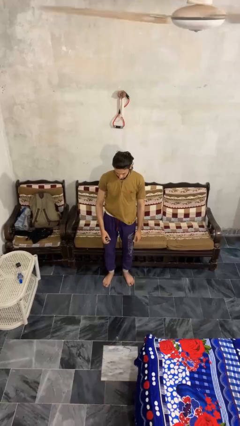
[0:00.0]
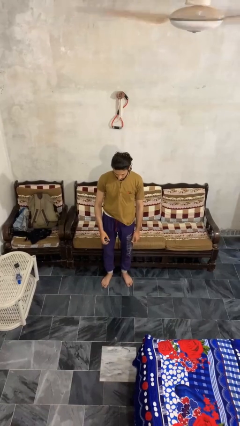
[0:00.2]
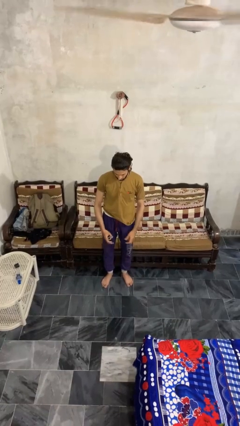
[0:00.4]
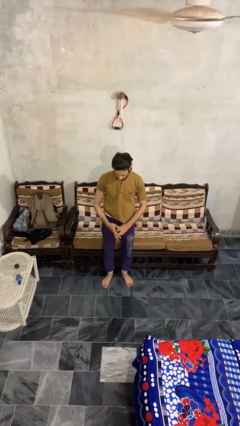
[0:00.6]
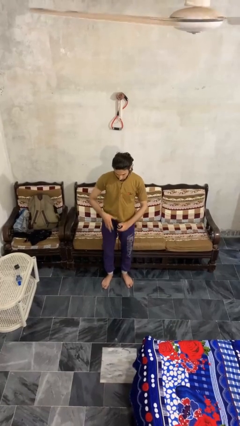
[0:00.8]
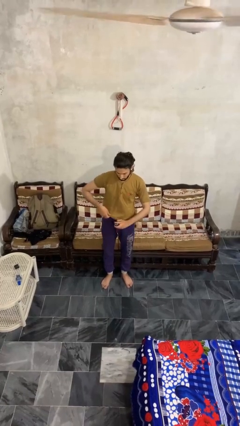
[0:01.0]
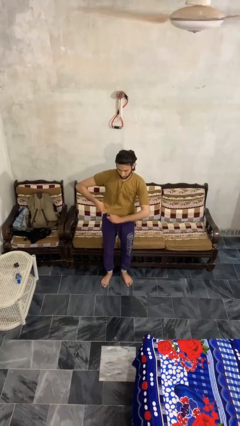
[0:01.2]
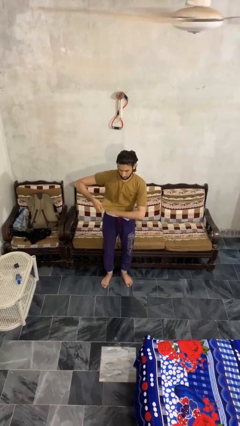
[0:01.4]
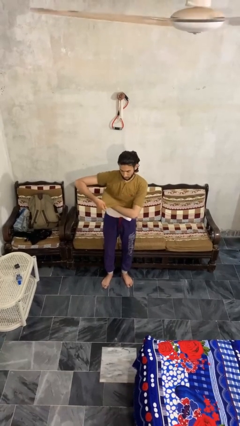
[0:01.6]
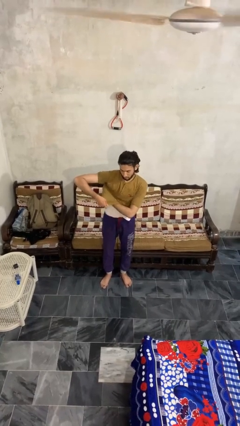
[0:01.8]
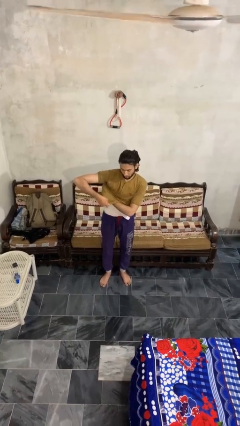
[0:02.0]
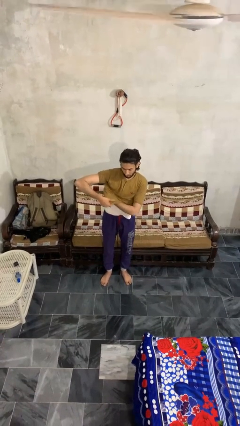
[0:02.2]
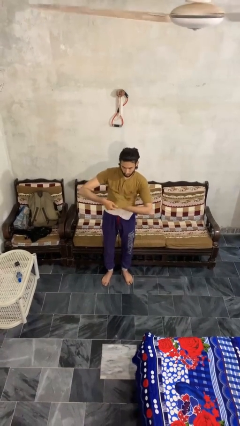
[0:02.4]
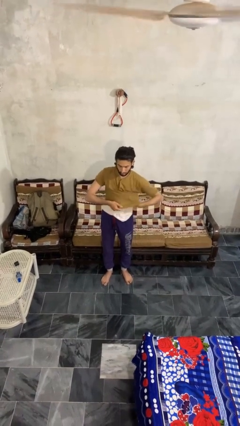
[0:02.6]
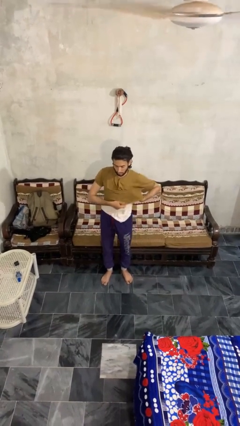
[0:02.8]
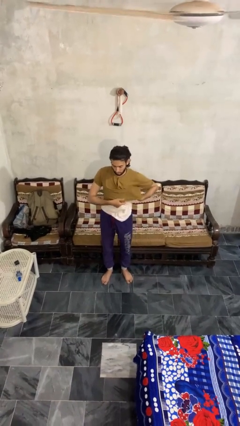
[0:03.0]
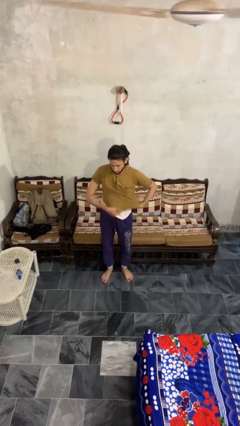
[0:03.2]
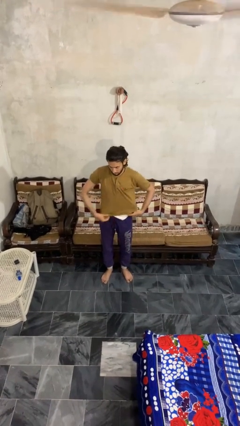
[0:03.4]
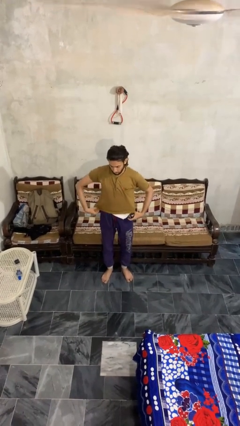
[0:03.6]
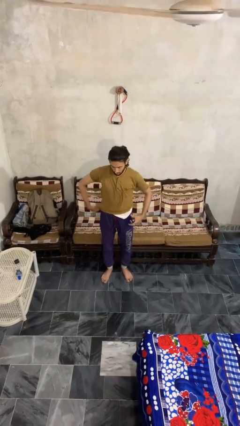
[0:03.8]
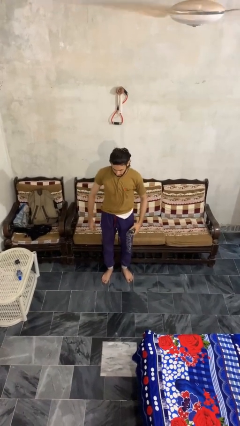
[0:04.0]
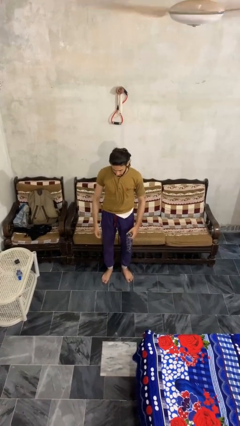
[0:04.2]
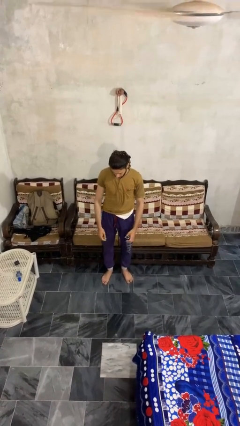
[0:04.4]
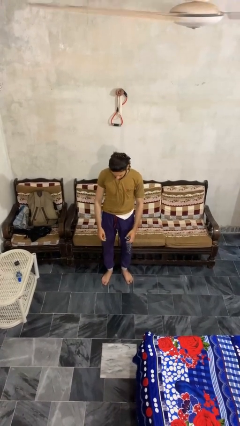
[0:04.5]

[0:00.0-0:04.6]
person applies deodorant

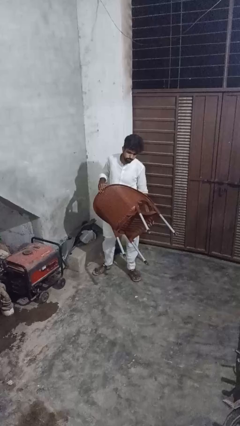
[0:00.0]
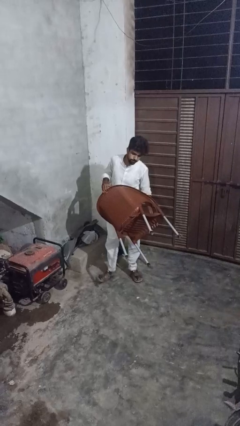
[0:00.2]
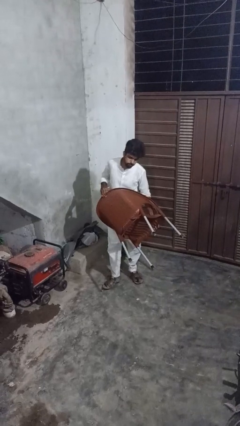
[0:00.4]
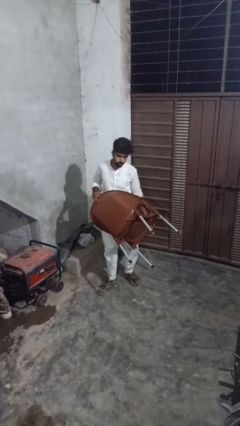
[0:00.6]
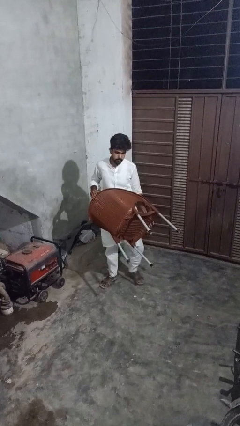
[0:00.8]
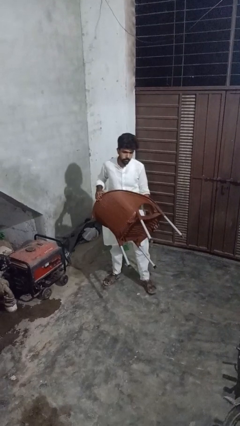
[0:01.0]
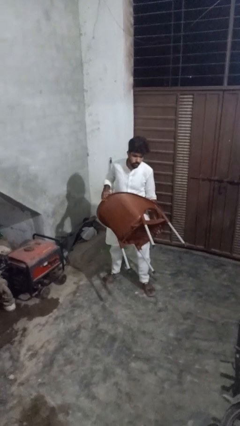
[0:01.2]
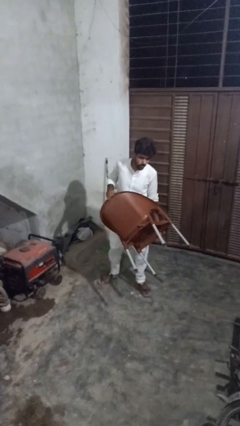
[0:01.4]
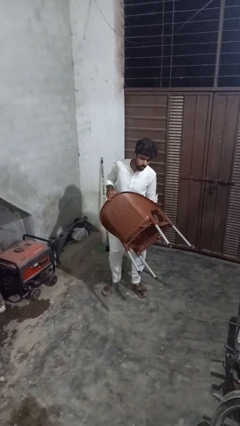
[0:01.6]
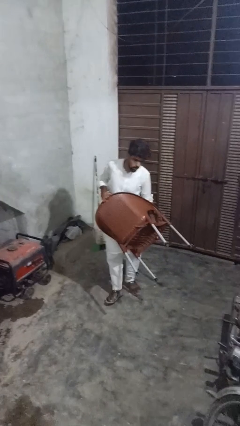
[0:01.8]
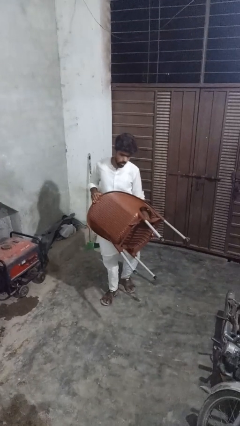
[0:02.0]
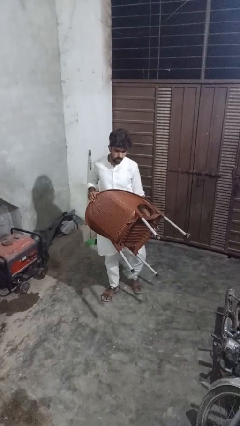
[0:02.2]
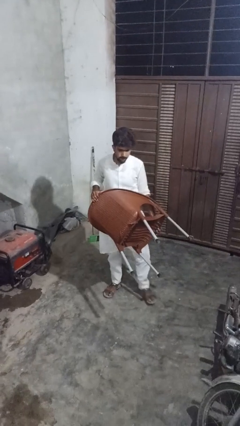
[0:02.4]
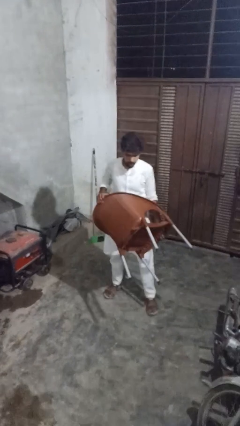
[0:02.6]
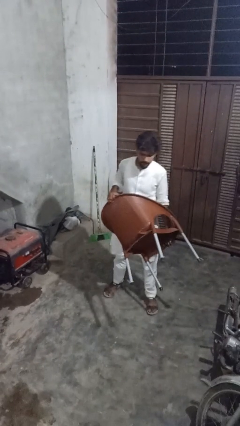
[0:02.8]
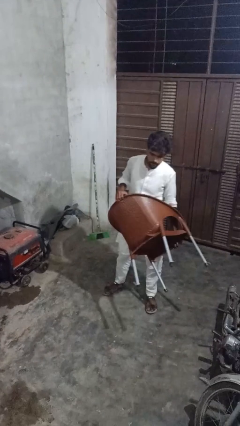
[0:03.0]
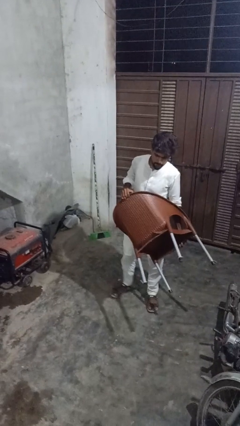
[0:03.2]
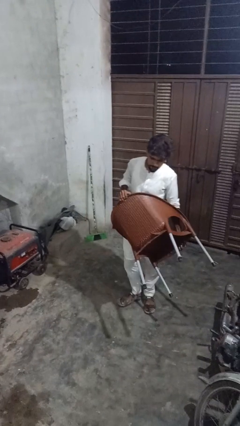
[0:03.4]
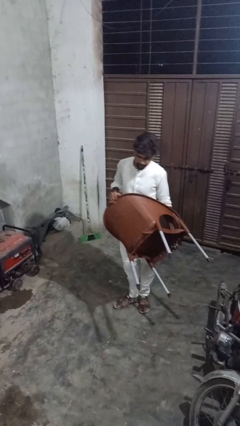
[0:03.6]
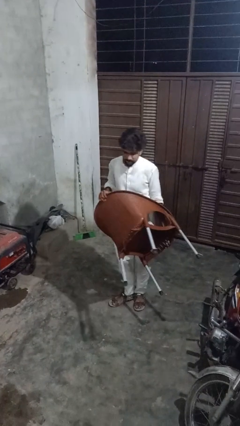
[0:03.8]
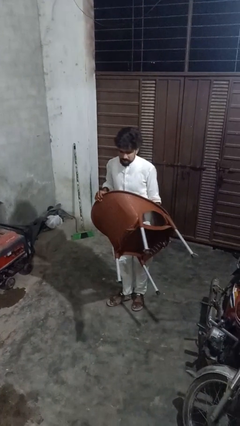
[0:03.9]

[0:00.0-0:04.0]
person carries furniture

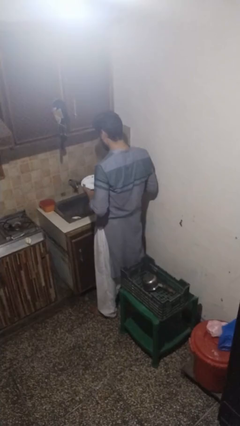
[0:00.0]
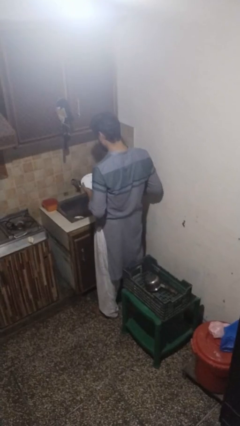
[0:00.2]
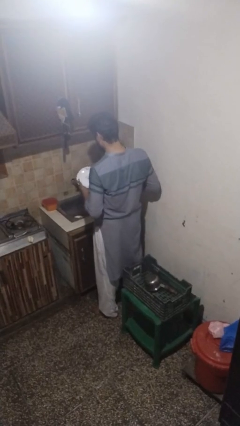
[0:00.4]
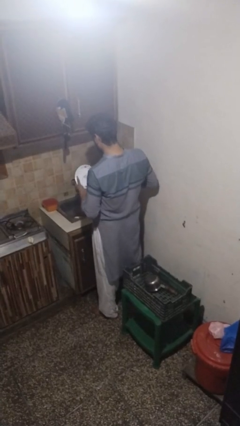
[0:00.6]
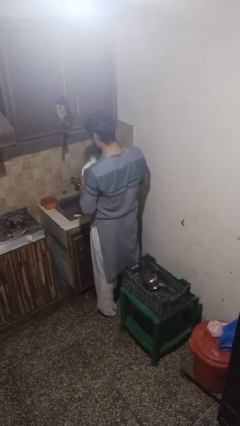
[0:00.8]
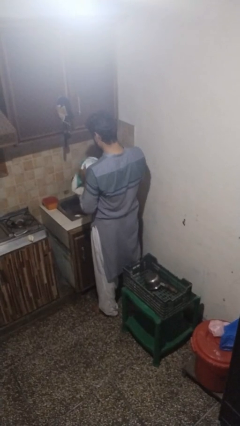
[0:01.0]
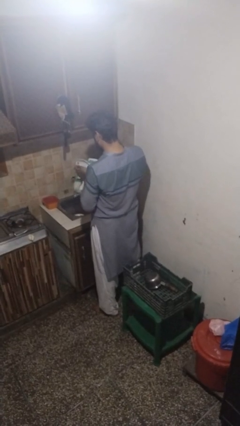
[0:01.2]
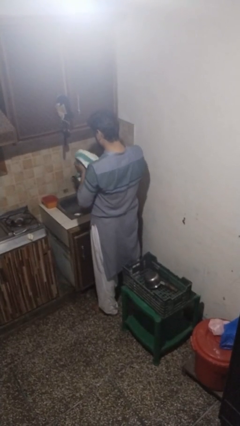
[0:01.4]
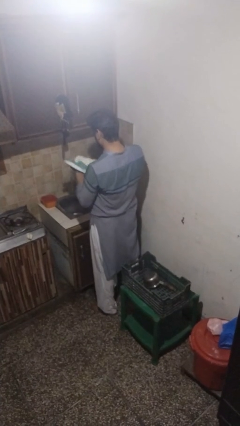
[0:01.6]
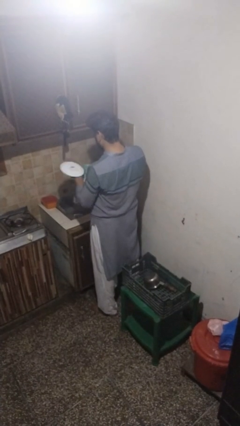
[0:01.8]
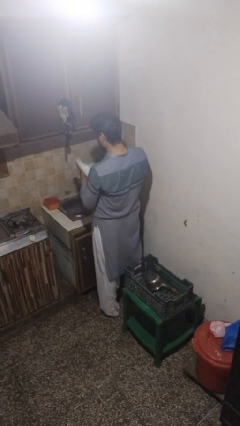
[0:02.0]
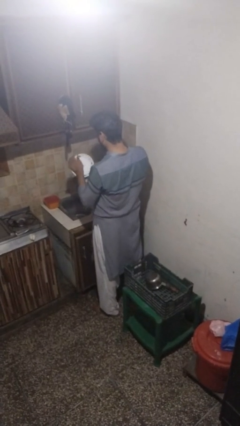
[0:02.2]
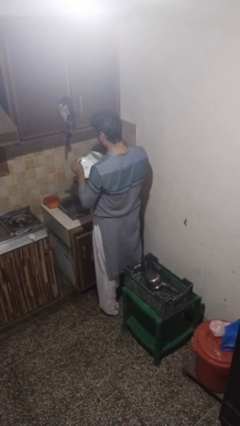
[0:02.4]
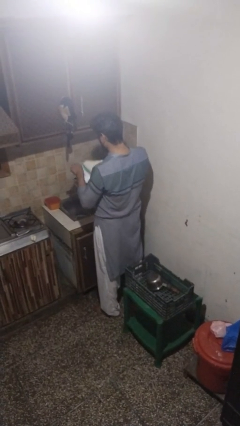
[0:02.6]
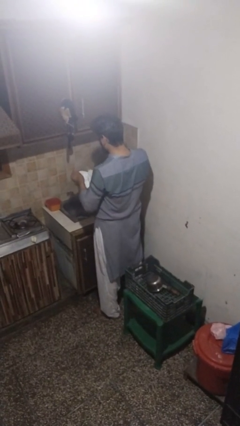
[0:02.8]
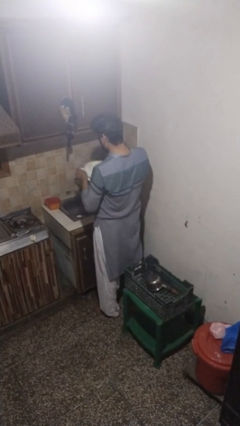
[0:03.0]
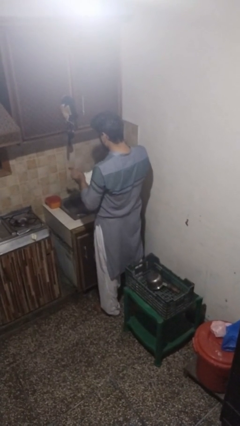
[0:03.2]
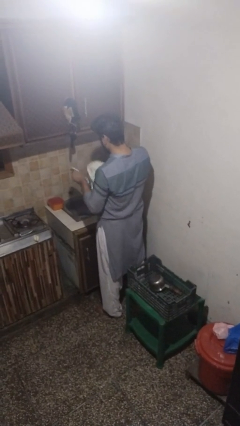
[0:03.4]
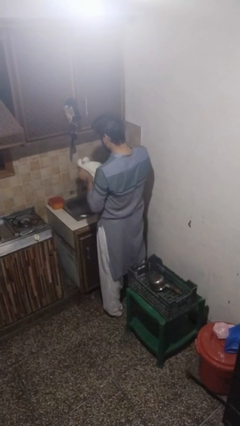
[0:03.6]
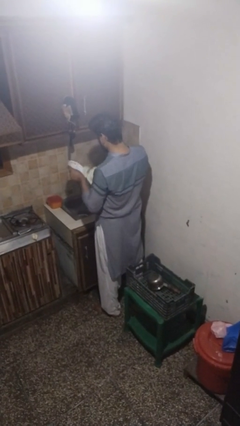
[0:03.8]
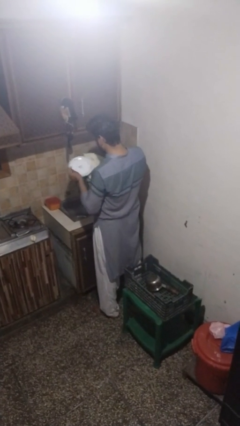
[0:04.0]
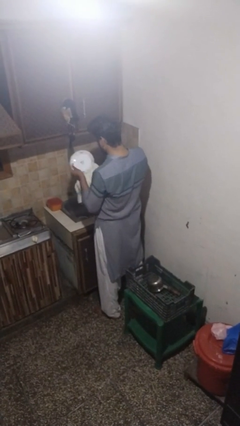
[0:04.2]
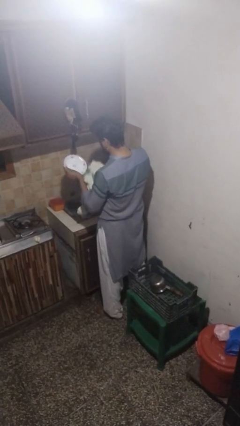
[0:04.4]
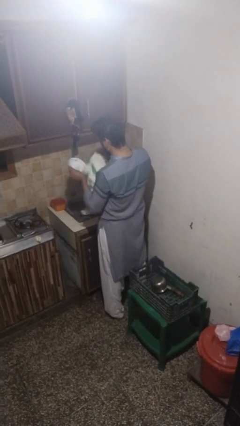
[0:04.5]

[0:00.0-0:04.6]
person dries dish

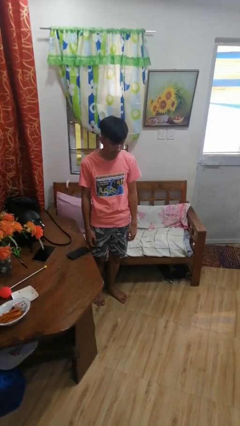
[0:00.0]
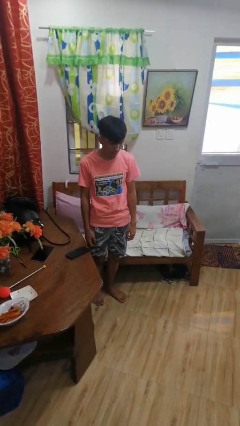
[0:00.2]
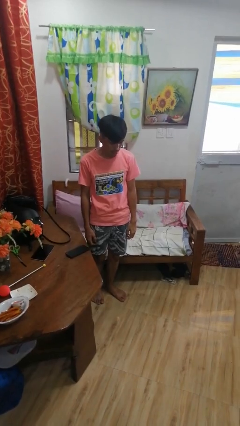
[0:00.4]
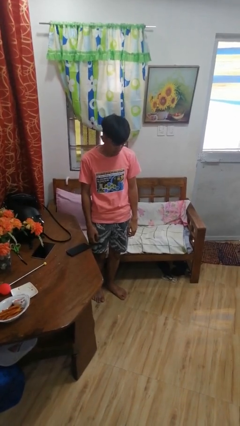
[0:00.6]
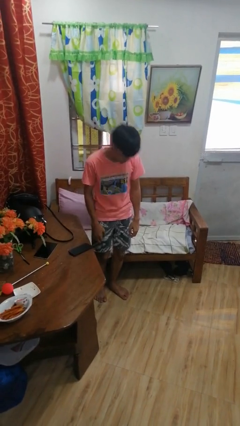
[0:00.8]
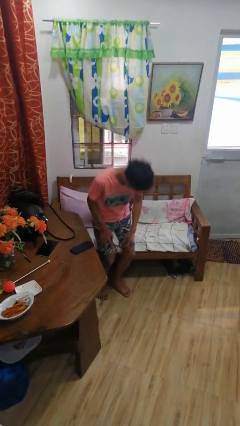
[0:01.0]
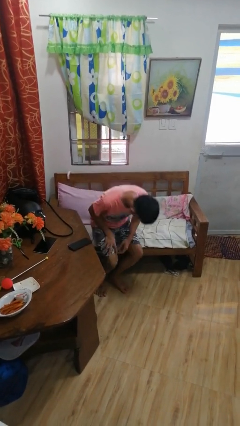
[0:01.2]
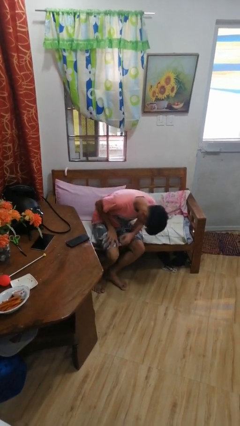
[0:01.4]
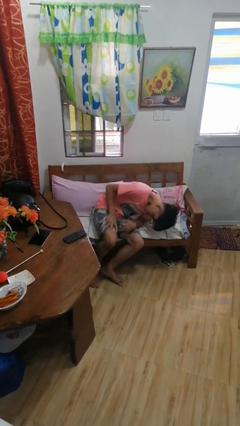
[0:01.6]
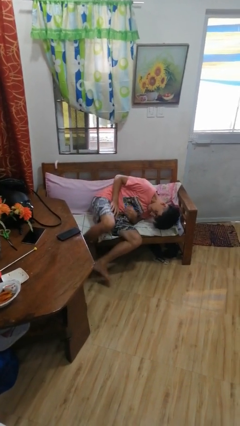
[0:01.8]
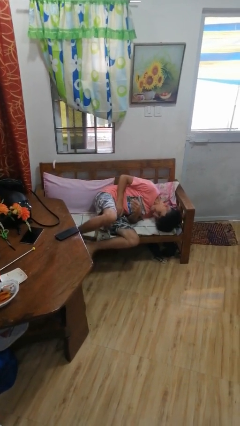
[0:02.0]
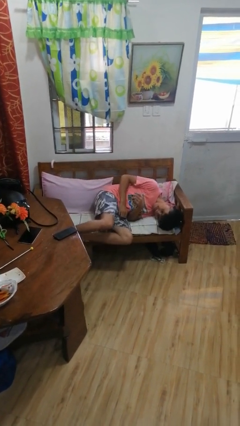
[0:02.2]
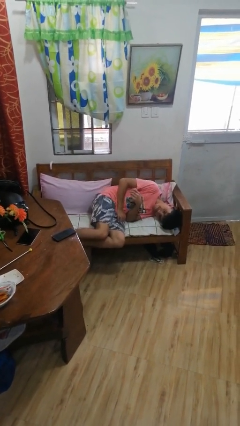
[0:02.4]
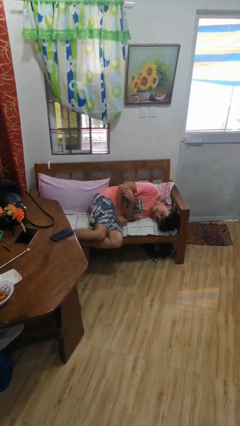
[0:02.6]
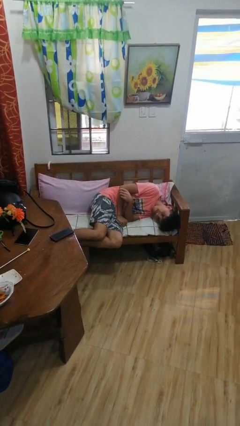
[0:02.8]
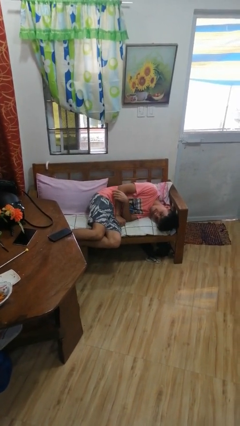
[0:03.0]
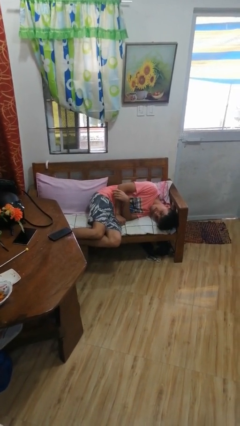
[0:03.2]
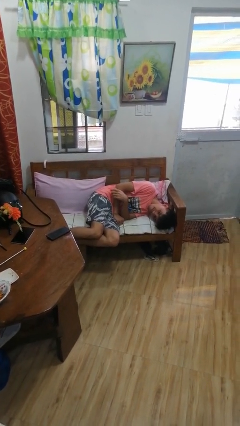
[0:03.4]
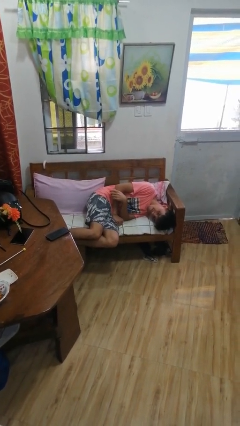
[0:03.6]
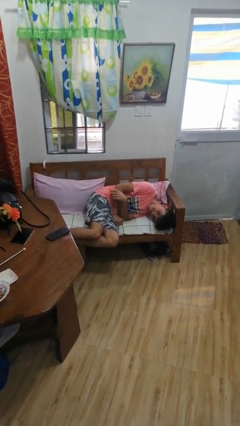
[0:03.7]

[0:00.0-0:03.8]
person lies down on couch

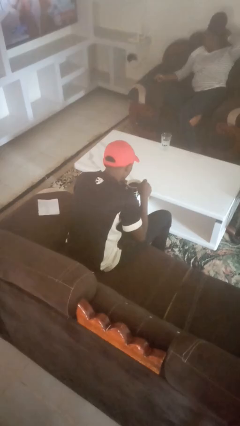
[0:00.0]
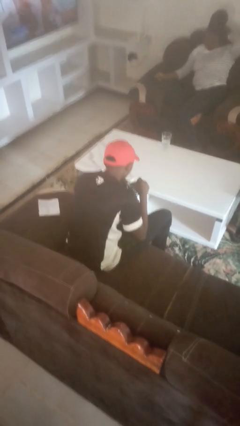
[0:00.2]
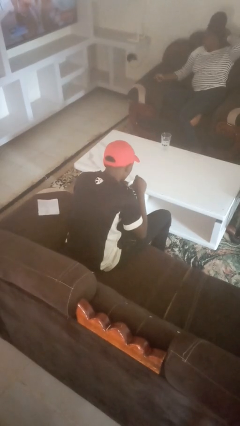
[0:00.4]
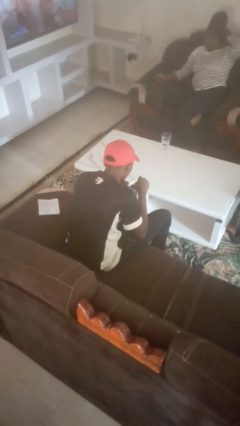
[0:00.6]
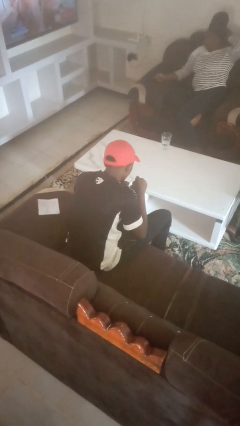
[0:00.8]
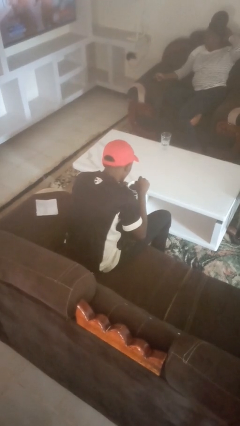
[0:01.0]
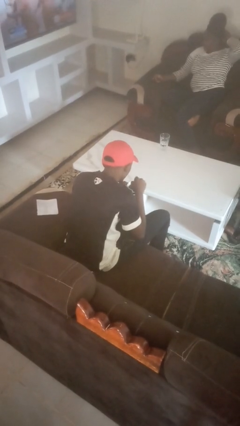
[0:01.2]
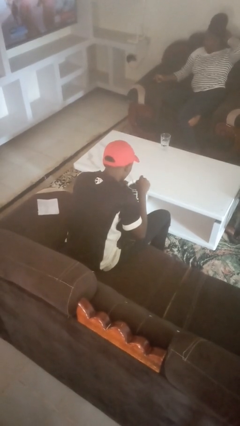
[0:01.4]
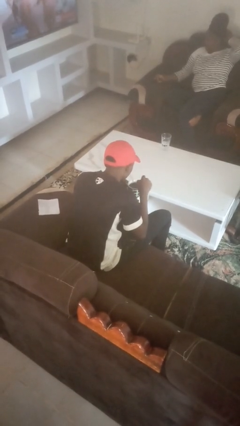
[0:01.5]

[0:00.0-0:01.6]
person stirs mug
